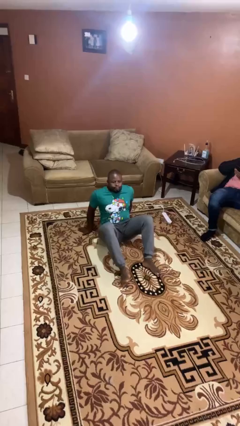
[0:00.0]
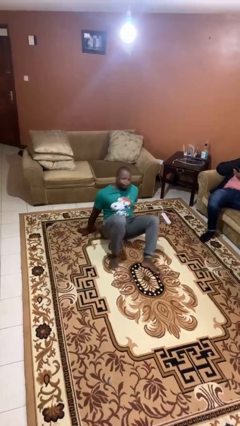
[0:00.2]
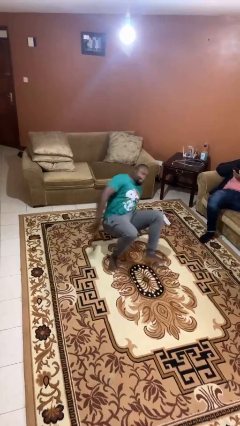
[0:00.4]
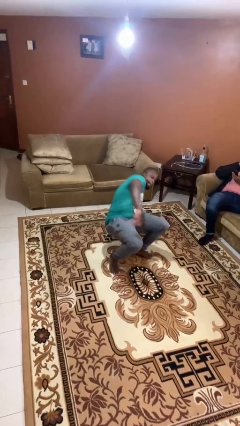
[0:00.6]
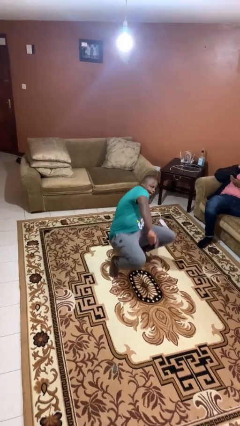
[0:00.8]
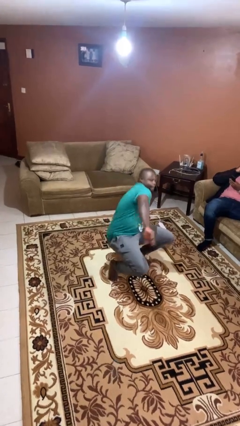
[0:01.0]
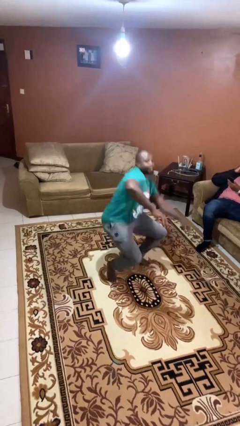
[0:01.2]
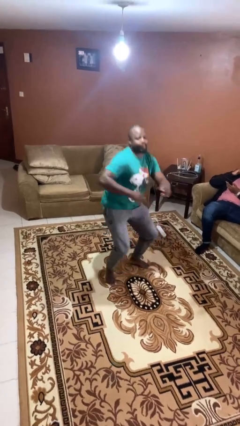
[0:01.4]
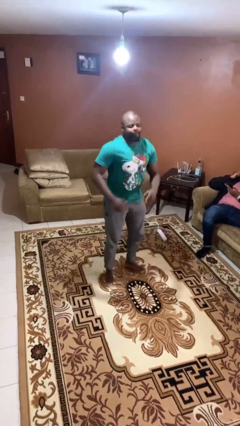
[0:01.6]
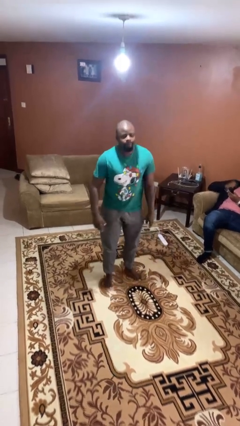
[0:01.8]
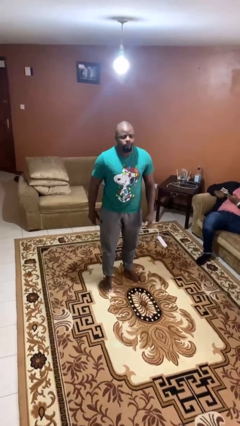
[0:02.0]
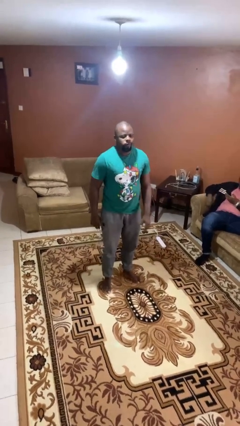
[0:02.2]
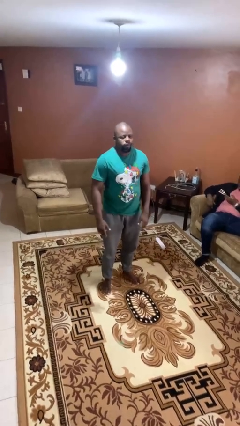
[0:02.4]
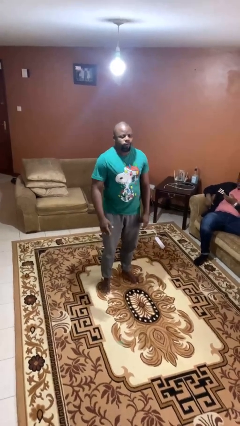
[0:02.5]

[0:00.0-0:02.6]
person stands up

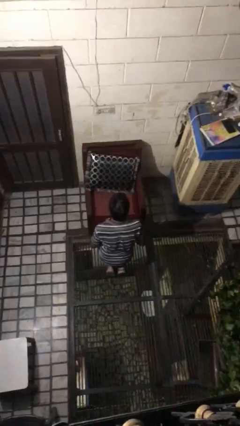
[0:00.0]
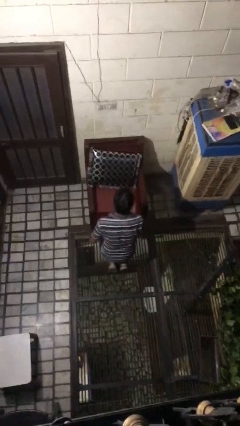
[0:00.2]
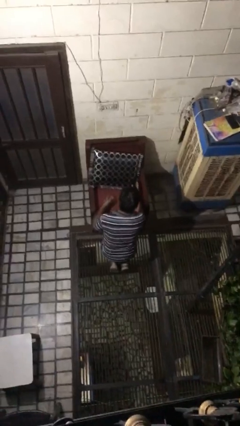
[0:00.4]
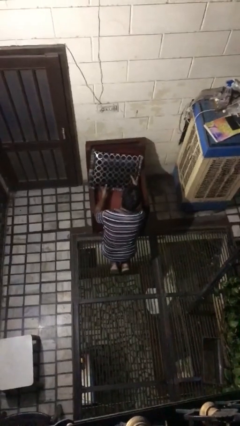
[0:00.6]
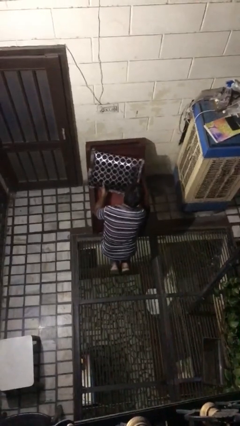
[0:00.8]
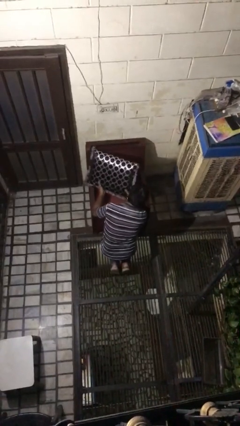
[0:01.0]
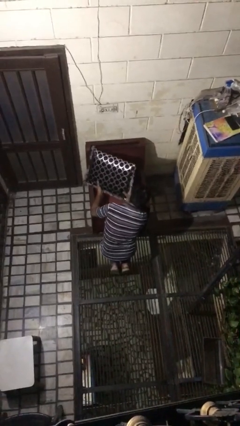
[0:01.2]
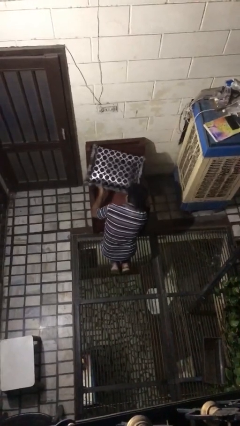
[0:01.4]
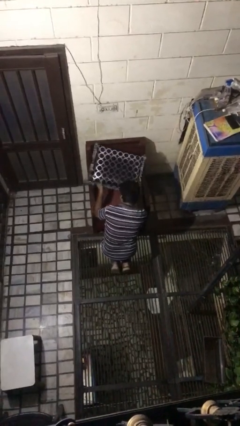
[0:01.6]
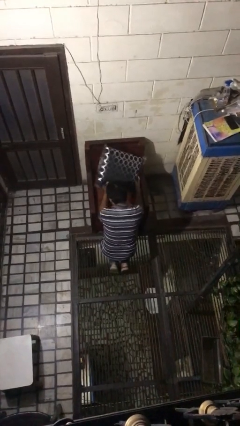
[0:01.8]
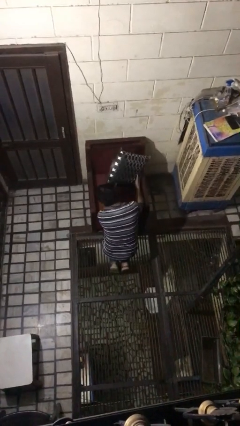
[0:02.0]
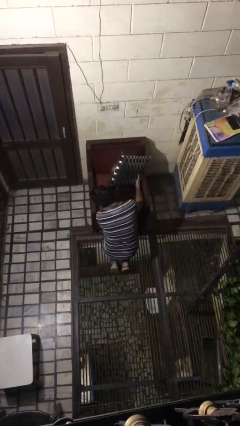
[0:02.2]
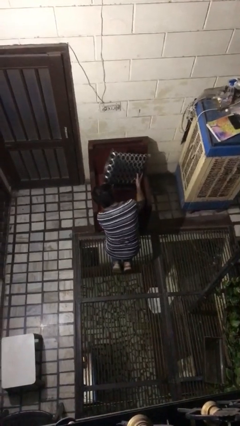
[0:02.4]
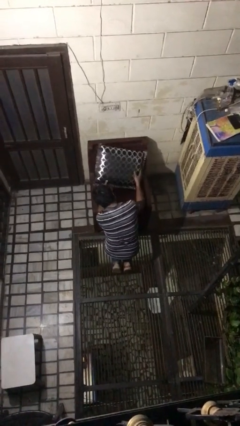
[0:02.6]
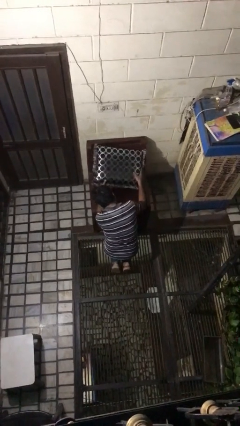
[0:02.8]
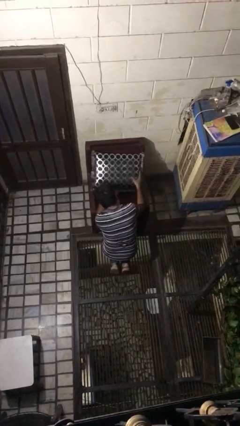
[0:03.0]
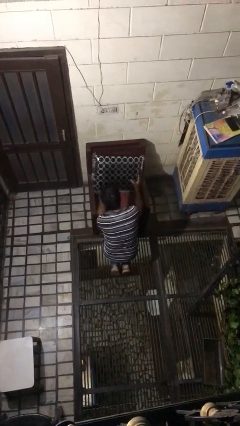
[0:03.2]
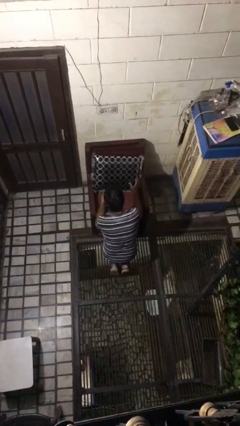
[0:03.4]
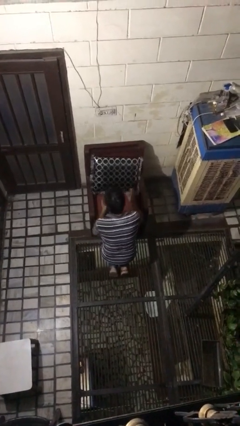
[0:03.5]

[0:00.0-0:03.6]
person searches in couch

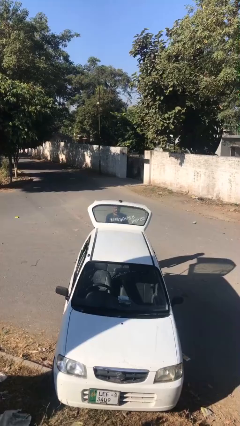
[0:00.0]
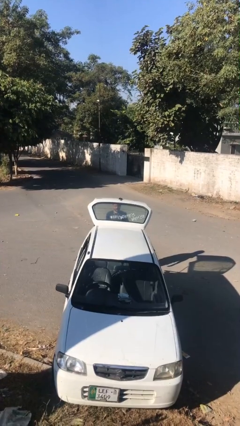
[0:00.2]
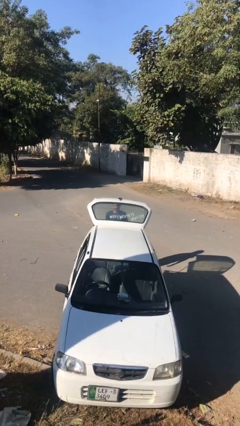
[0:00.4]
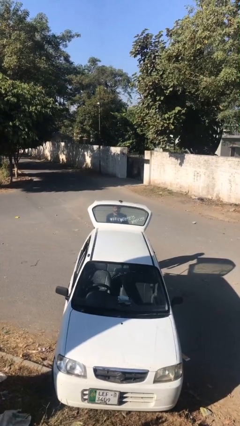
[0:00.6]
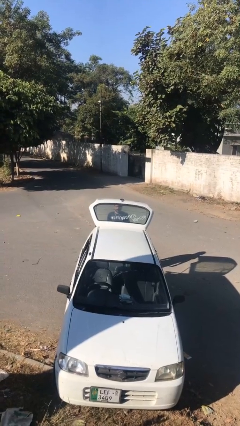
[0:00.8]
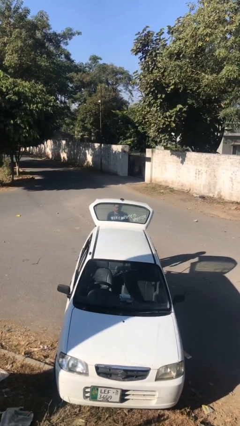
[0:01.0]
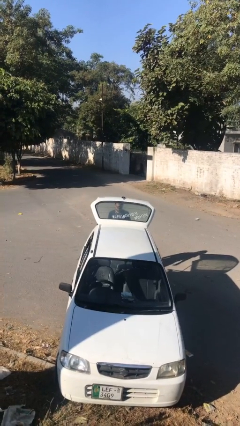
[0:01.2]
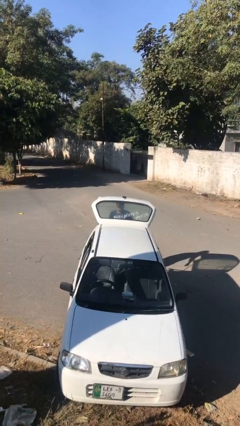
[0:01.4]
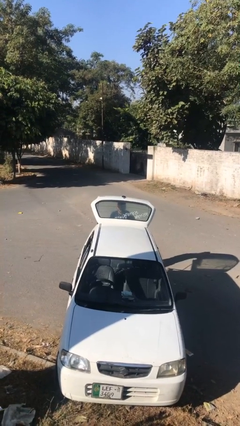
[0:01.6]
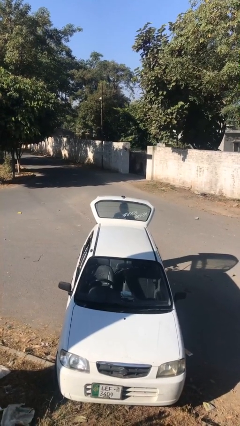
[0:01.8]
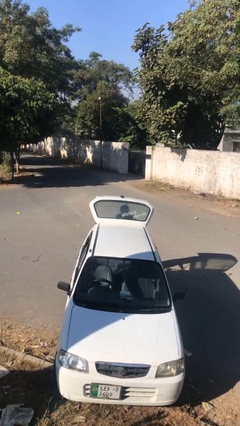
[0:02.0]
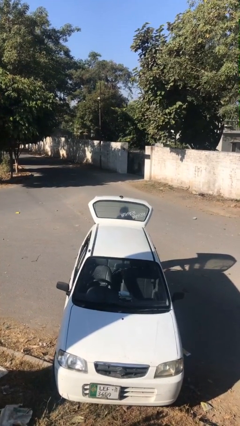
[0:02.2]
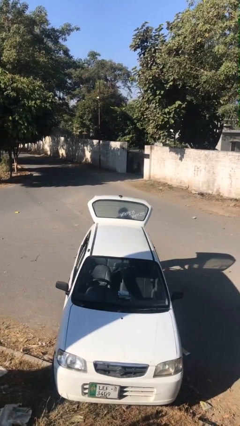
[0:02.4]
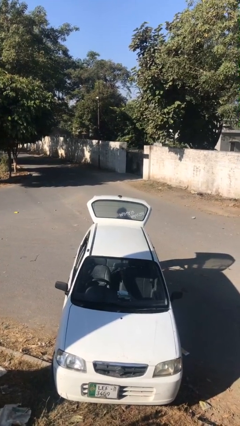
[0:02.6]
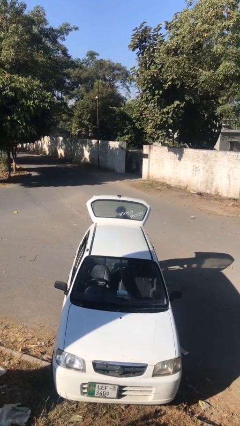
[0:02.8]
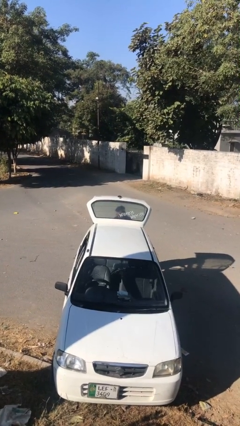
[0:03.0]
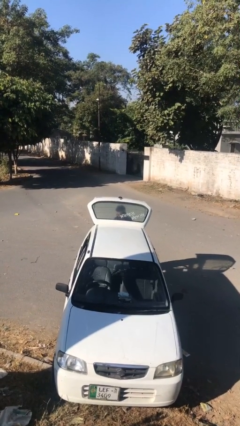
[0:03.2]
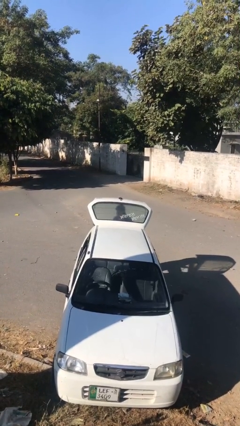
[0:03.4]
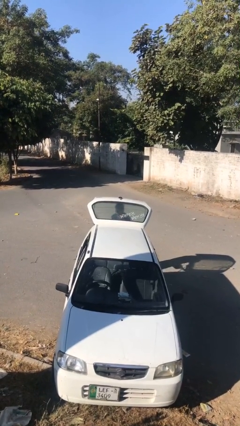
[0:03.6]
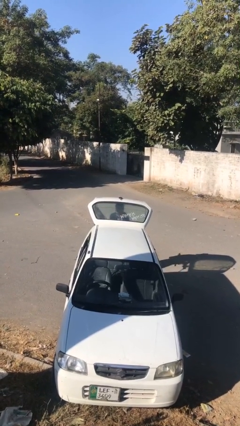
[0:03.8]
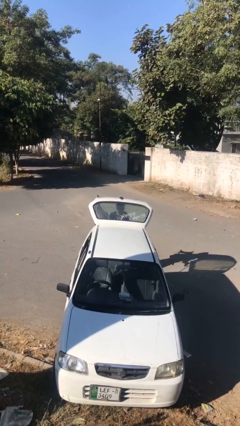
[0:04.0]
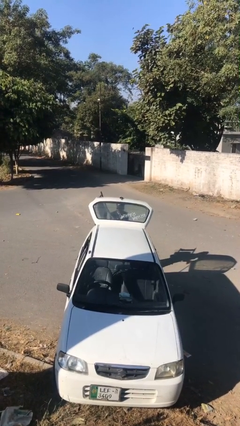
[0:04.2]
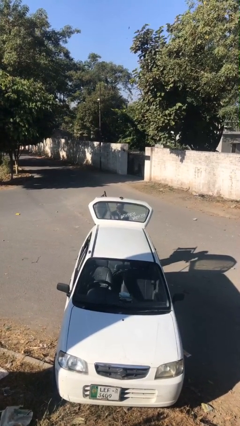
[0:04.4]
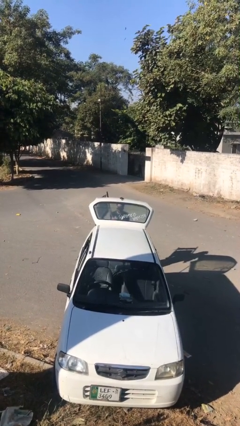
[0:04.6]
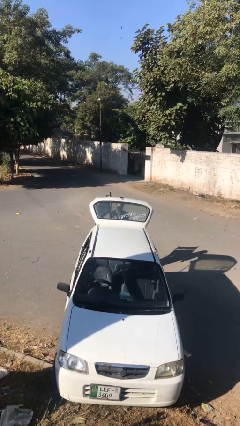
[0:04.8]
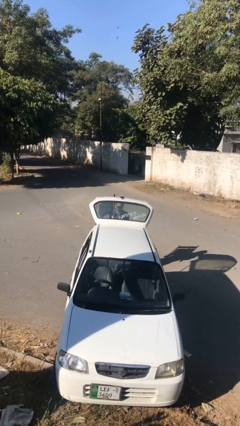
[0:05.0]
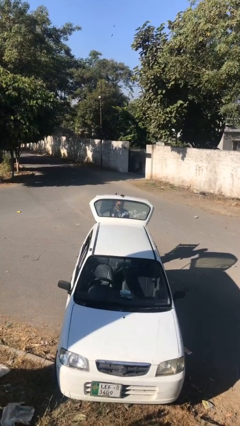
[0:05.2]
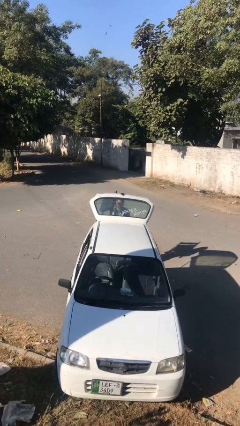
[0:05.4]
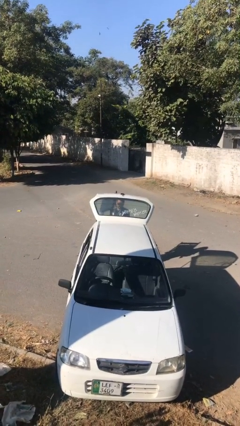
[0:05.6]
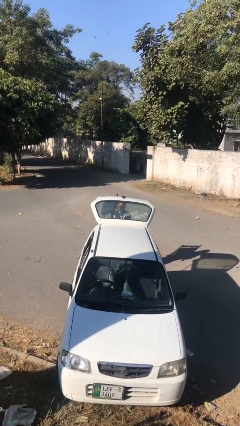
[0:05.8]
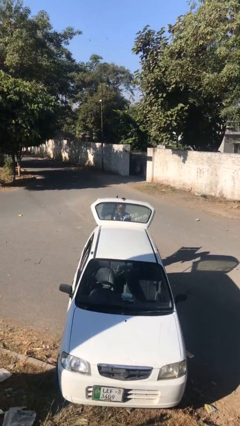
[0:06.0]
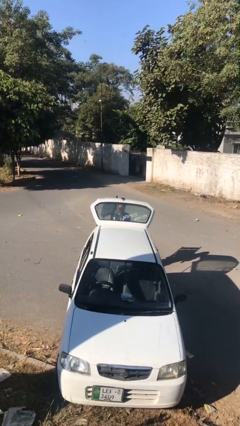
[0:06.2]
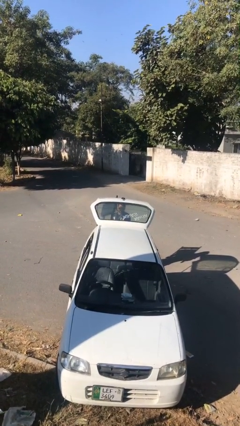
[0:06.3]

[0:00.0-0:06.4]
person unloads car

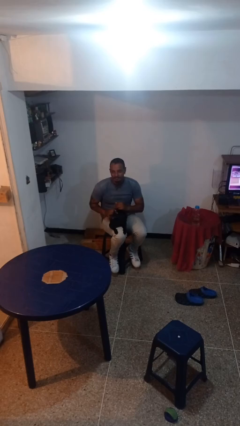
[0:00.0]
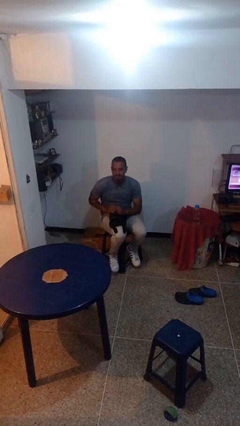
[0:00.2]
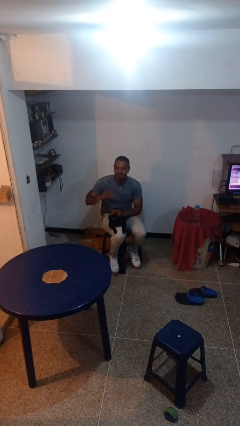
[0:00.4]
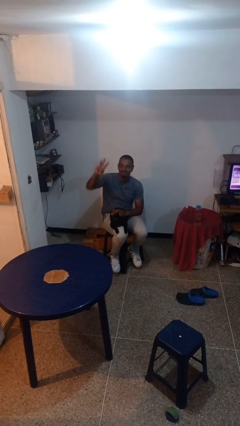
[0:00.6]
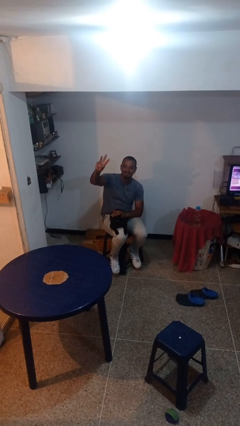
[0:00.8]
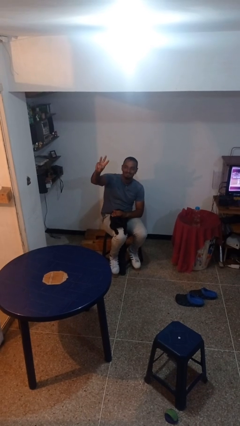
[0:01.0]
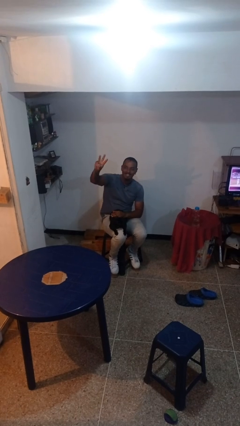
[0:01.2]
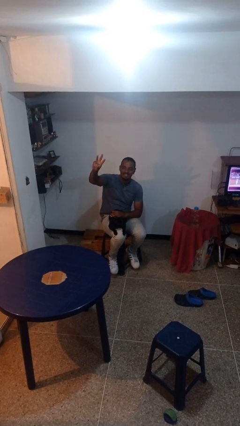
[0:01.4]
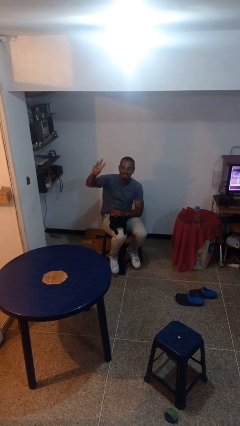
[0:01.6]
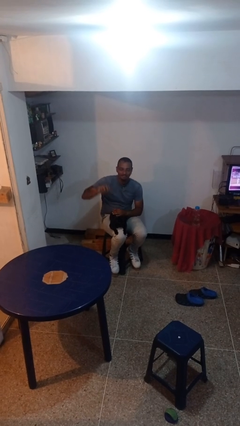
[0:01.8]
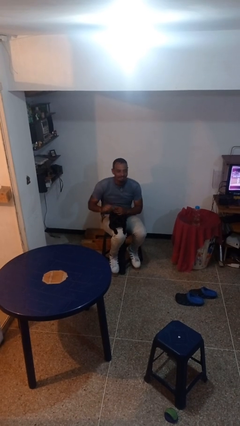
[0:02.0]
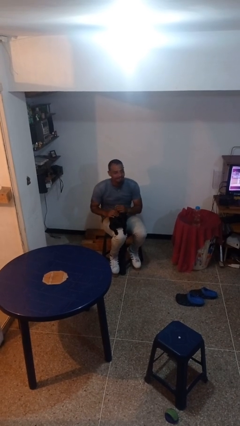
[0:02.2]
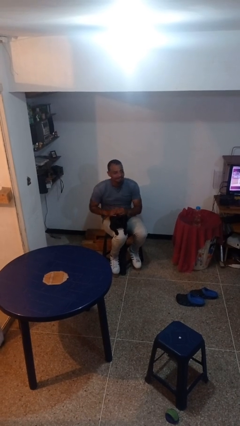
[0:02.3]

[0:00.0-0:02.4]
person gestures number three

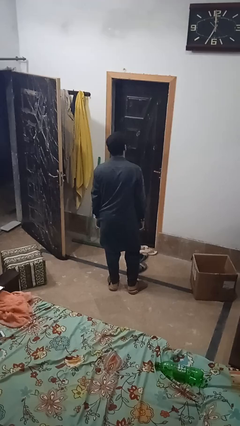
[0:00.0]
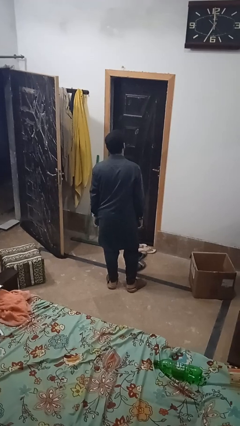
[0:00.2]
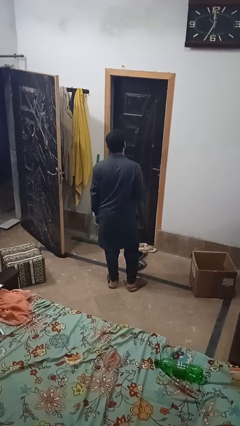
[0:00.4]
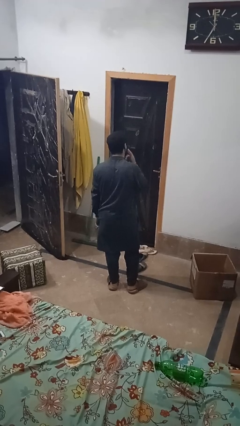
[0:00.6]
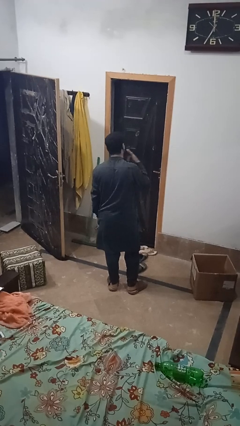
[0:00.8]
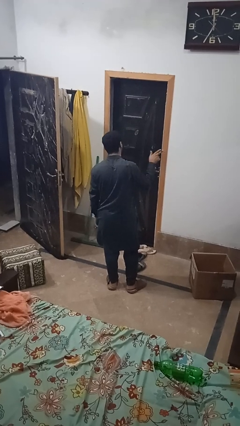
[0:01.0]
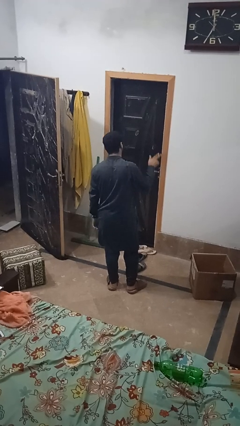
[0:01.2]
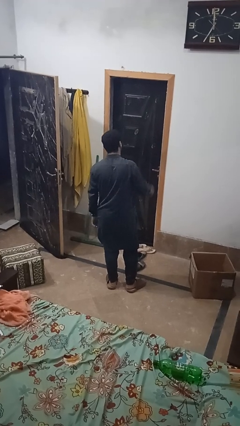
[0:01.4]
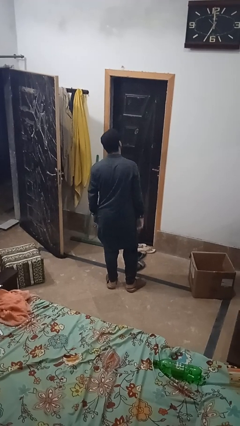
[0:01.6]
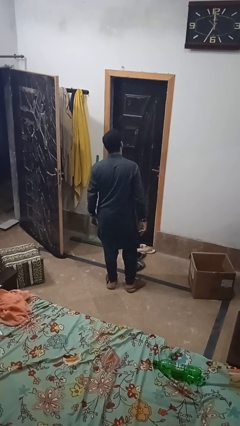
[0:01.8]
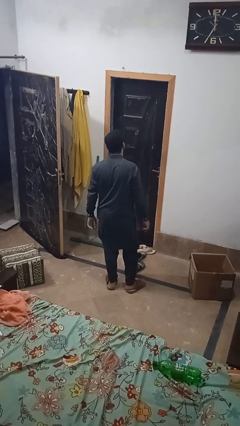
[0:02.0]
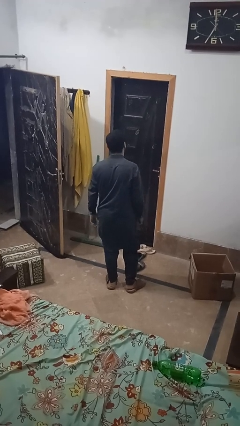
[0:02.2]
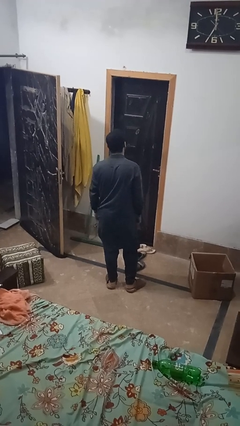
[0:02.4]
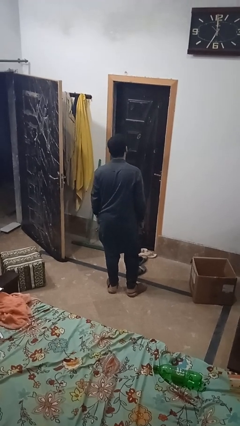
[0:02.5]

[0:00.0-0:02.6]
person gestures blow kiss
